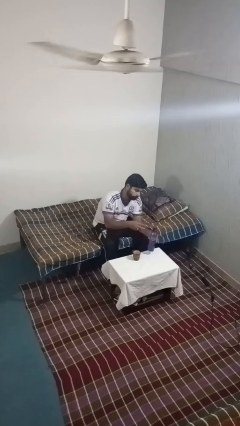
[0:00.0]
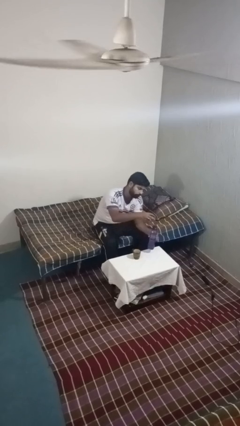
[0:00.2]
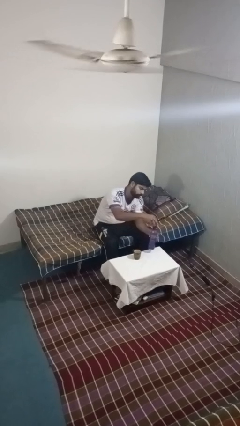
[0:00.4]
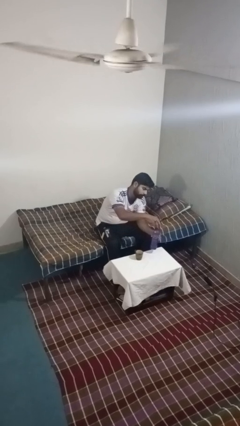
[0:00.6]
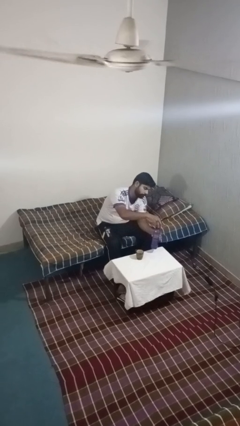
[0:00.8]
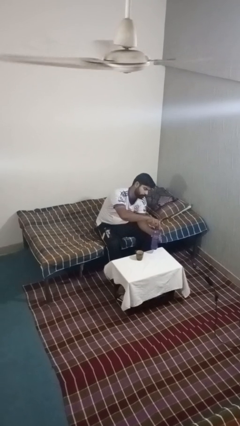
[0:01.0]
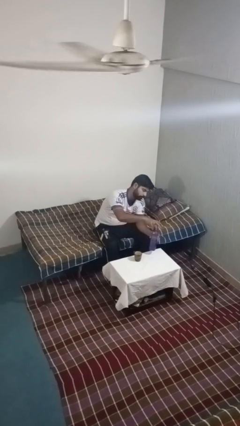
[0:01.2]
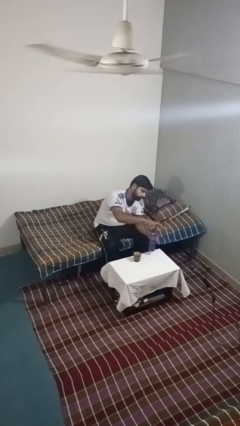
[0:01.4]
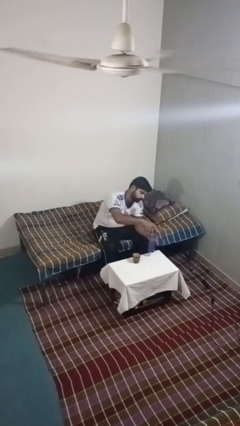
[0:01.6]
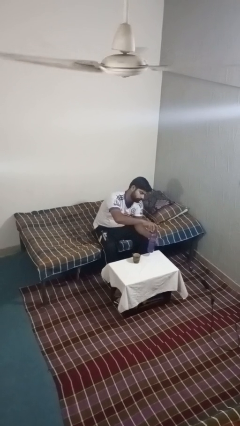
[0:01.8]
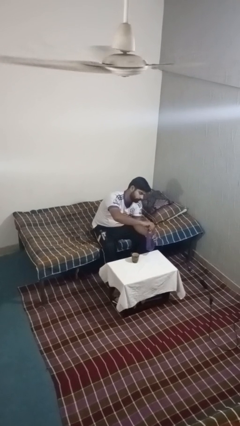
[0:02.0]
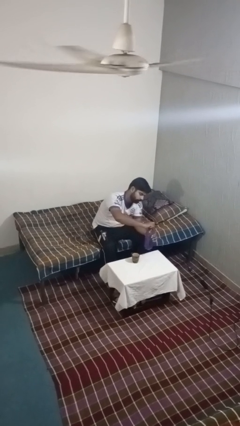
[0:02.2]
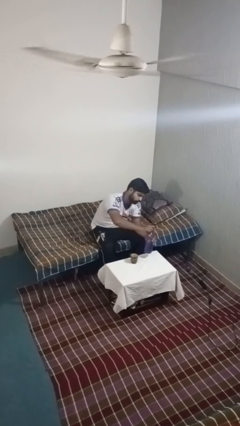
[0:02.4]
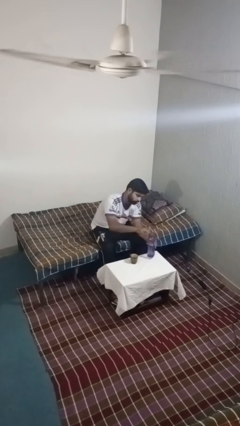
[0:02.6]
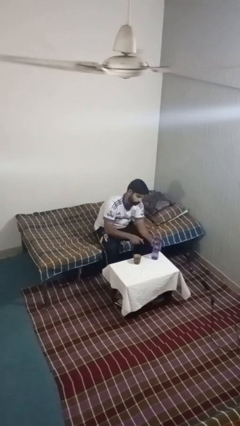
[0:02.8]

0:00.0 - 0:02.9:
person screws lid to bottle

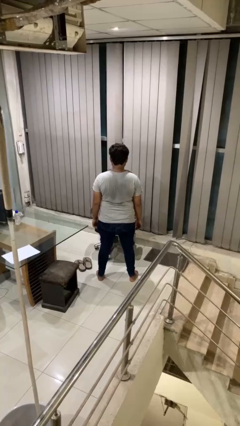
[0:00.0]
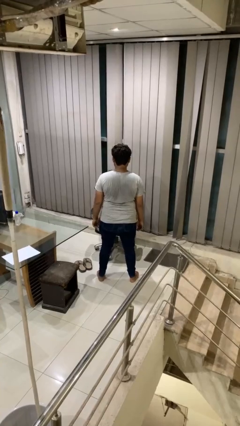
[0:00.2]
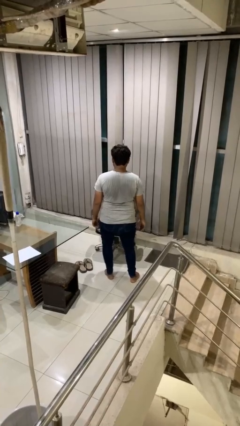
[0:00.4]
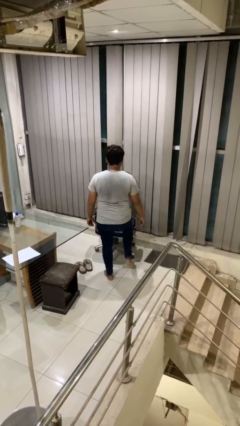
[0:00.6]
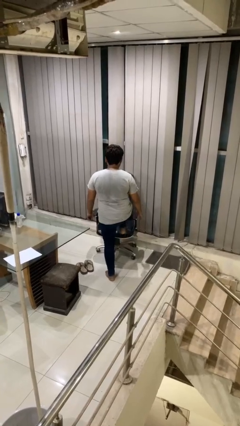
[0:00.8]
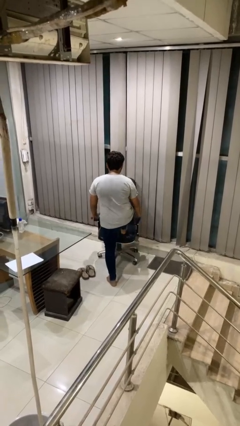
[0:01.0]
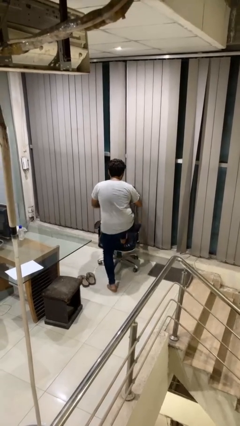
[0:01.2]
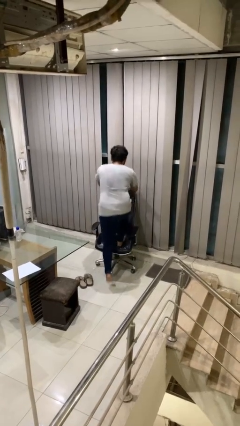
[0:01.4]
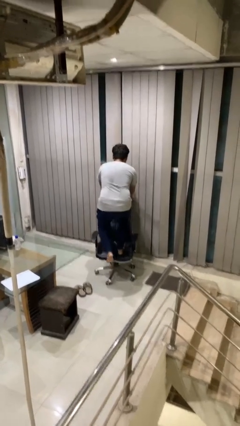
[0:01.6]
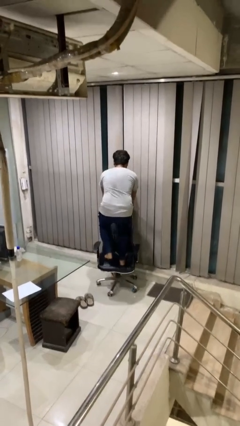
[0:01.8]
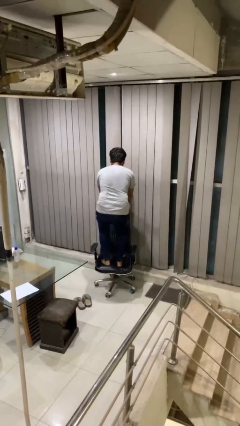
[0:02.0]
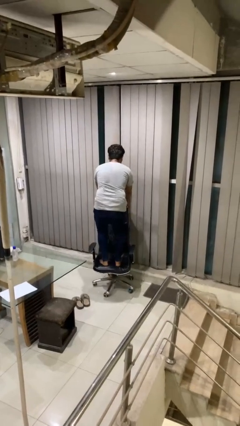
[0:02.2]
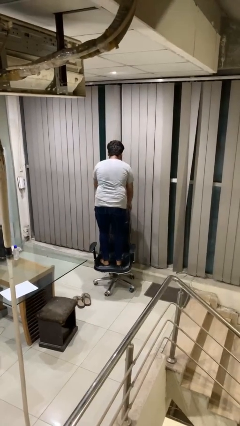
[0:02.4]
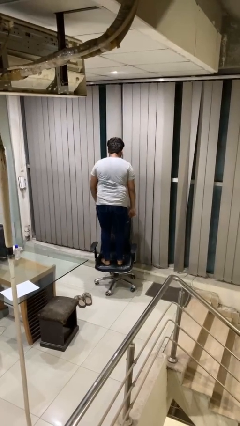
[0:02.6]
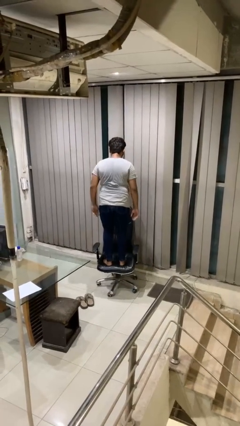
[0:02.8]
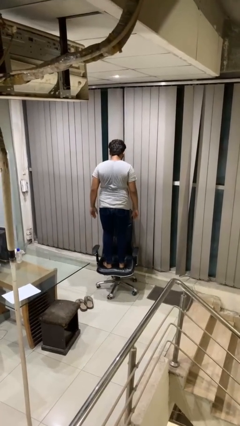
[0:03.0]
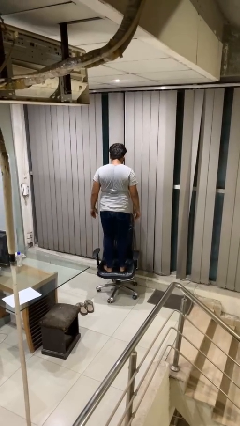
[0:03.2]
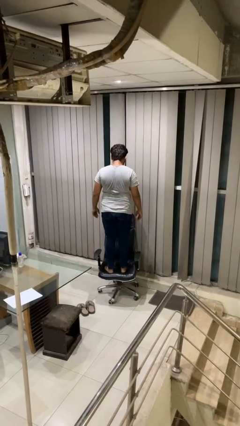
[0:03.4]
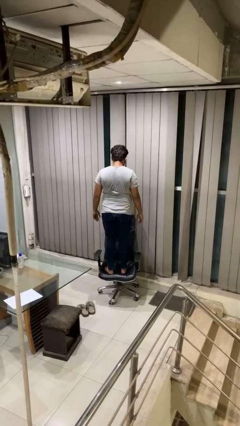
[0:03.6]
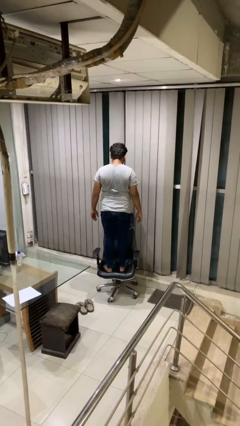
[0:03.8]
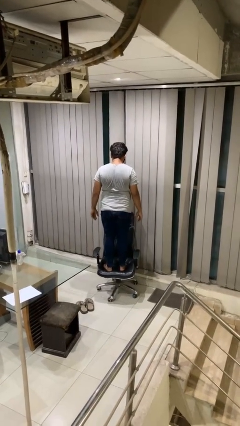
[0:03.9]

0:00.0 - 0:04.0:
person climbs on chair

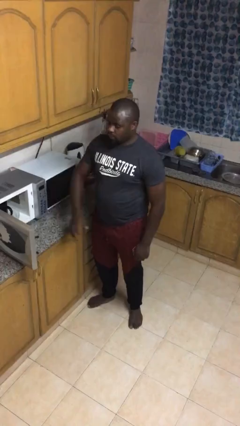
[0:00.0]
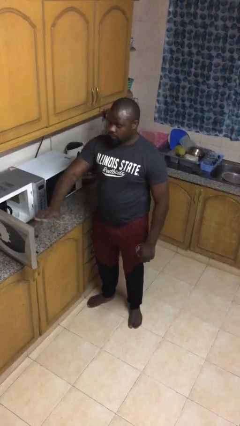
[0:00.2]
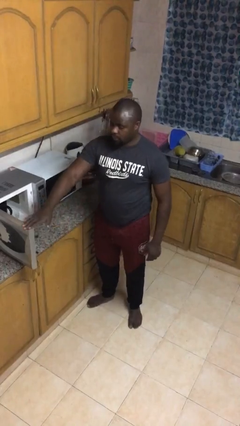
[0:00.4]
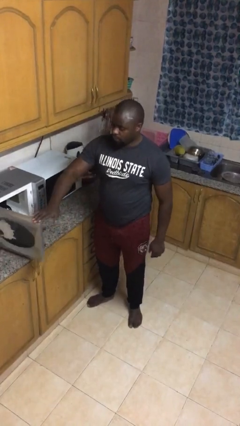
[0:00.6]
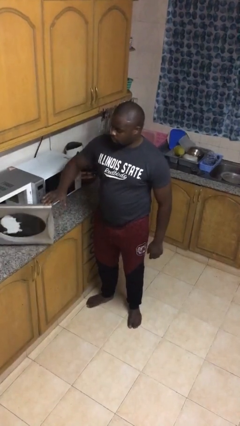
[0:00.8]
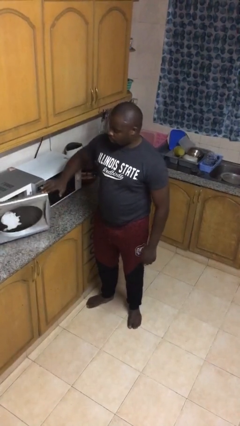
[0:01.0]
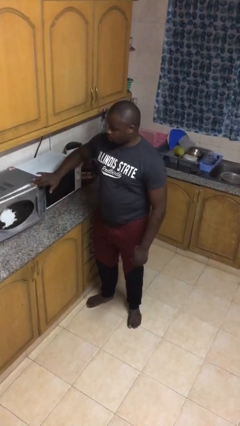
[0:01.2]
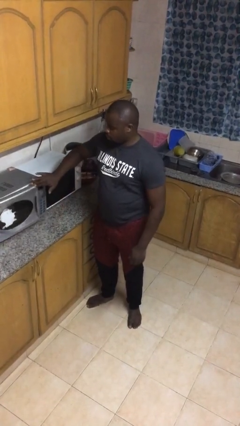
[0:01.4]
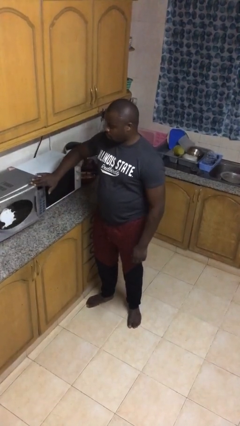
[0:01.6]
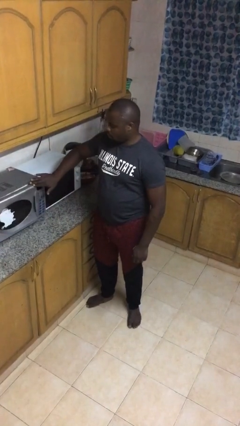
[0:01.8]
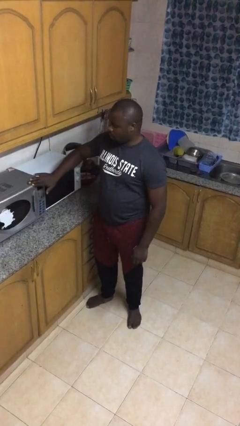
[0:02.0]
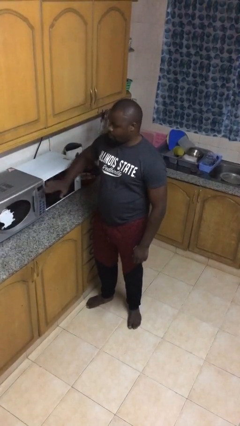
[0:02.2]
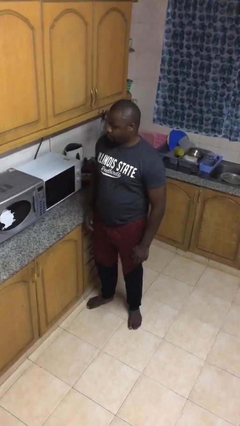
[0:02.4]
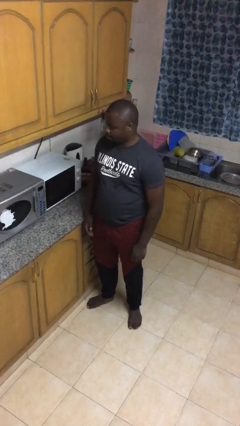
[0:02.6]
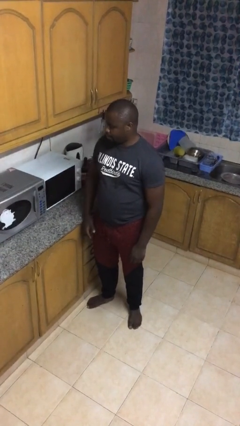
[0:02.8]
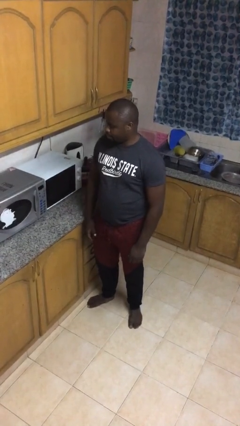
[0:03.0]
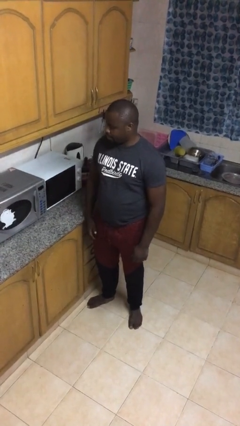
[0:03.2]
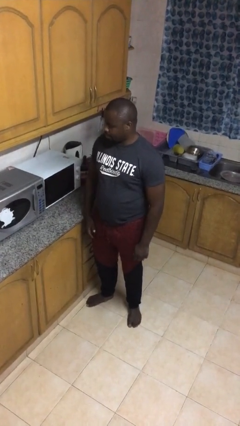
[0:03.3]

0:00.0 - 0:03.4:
person closes microwave

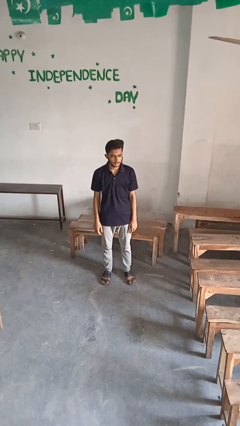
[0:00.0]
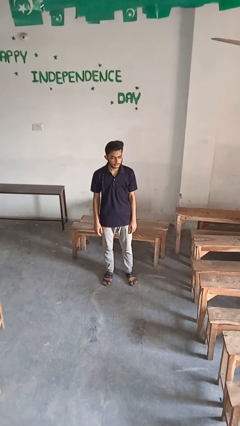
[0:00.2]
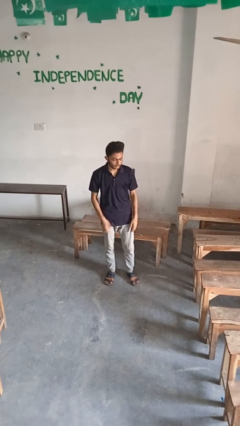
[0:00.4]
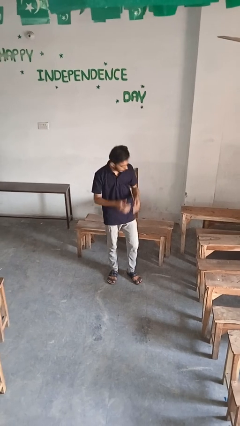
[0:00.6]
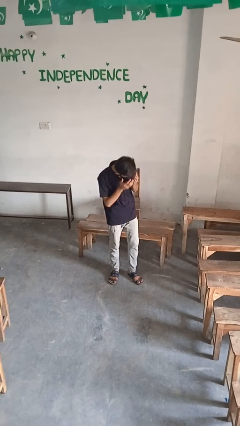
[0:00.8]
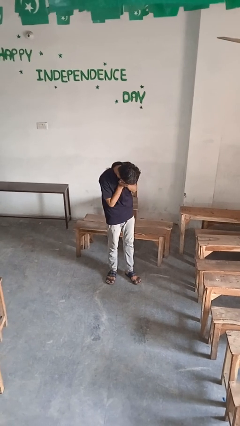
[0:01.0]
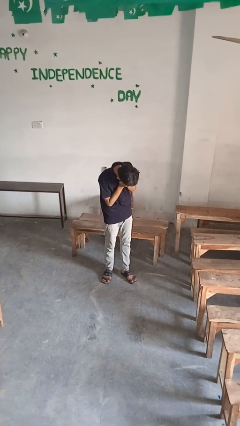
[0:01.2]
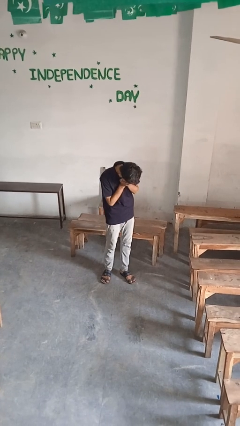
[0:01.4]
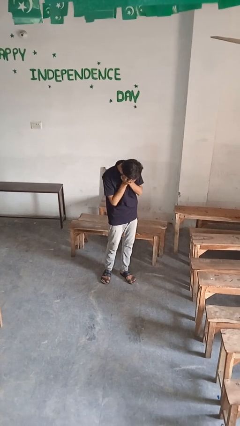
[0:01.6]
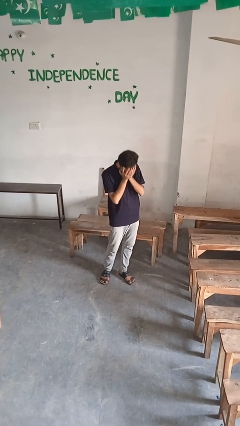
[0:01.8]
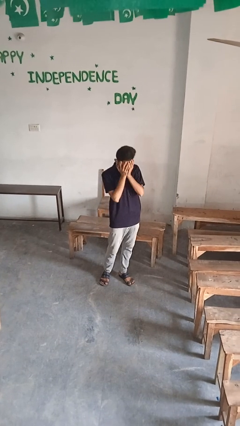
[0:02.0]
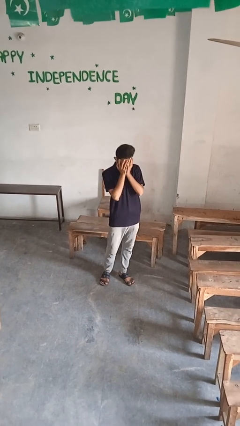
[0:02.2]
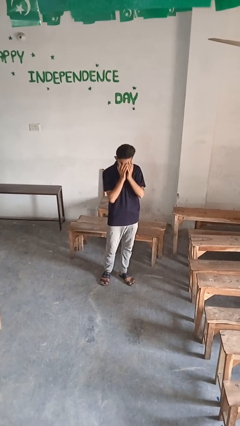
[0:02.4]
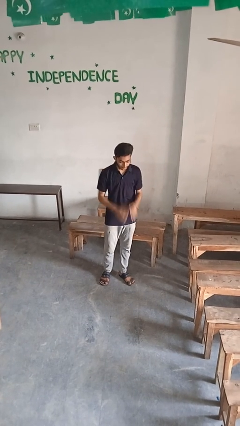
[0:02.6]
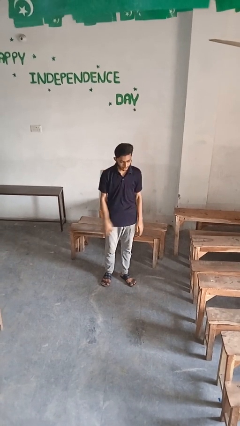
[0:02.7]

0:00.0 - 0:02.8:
person covers face with hands

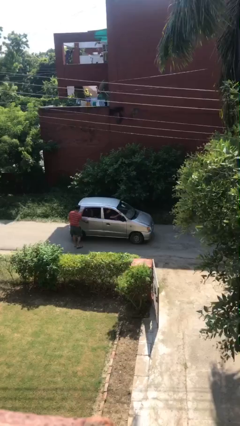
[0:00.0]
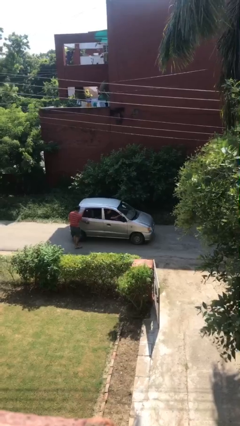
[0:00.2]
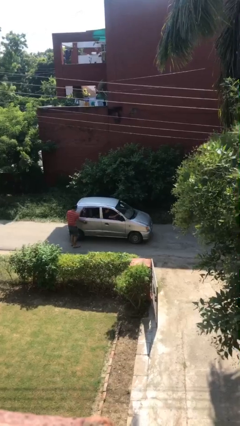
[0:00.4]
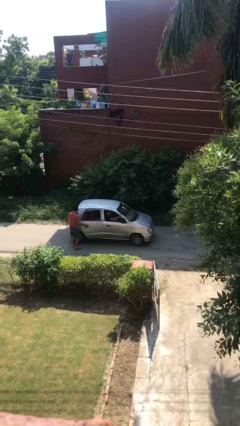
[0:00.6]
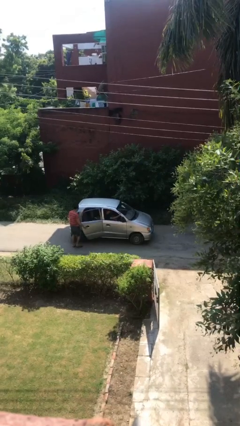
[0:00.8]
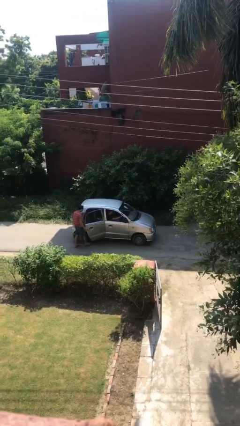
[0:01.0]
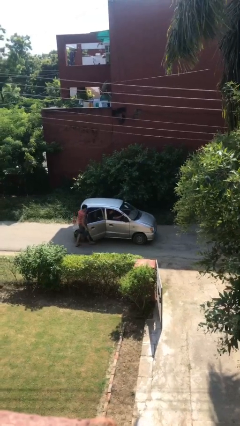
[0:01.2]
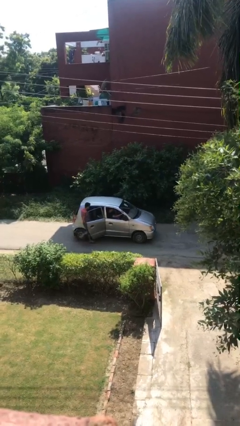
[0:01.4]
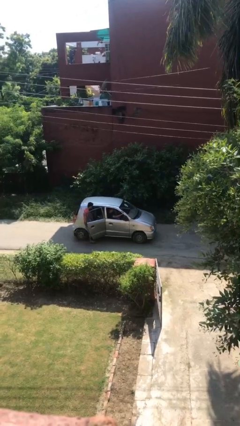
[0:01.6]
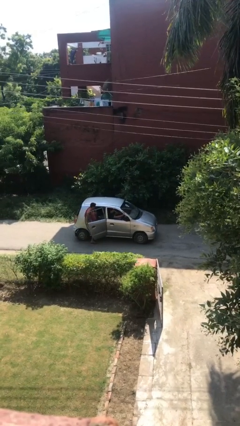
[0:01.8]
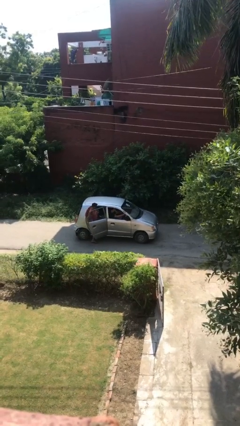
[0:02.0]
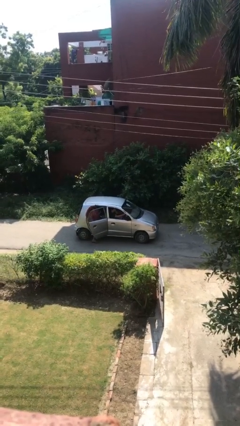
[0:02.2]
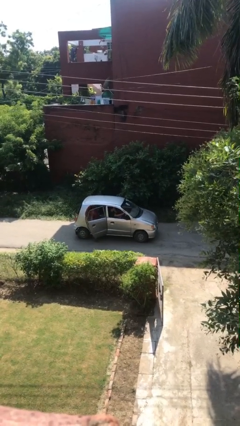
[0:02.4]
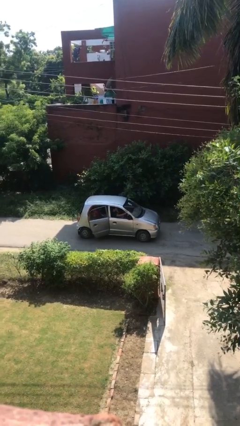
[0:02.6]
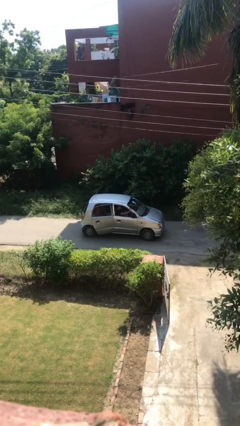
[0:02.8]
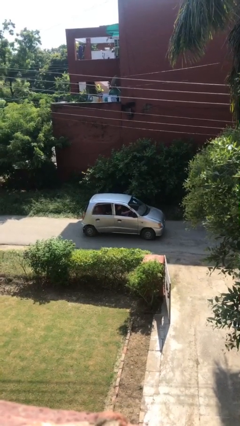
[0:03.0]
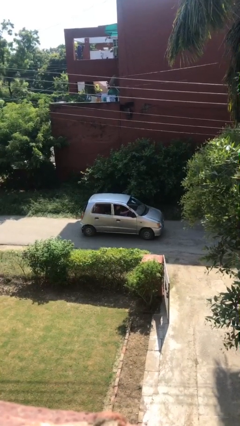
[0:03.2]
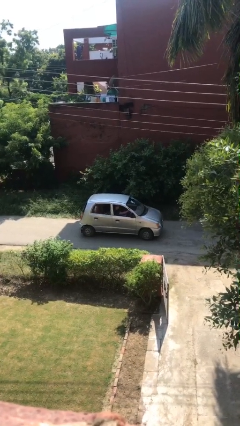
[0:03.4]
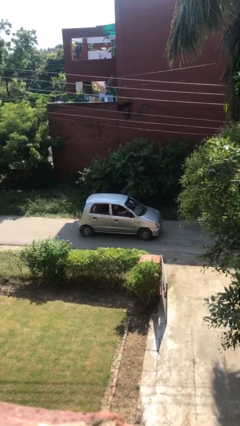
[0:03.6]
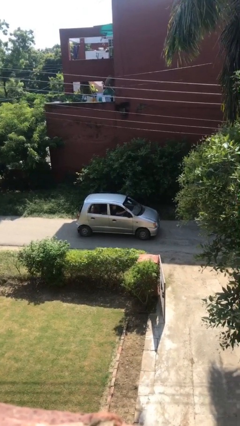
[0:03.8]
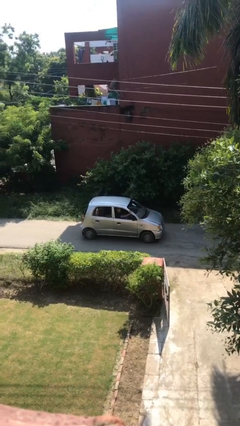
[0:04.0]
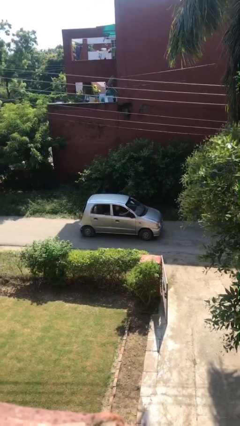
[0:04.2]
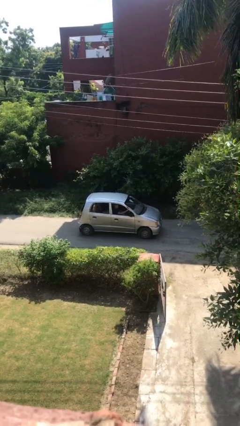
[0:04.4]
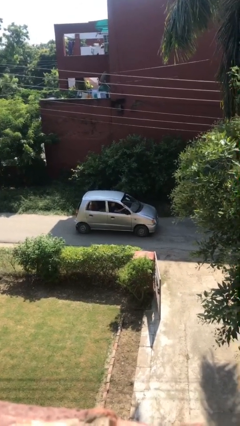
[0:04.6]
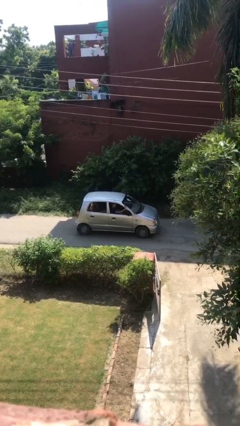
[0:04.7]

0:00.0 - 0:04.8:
car picks up person
